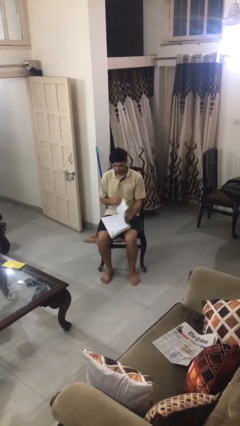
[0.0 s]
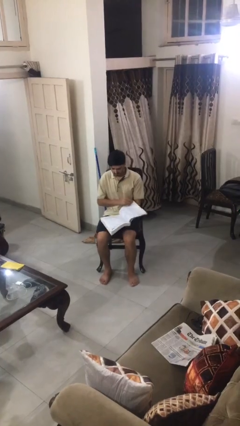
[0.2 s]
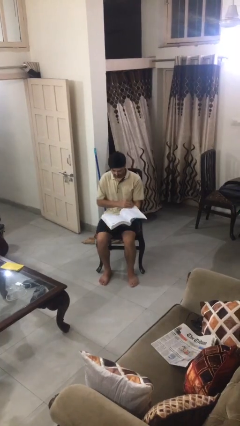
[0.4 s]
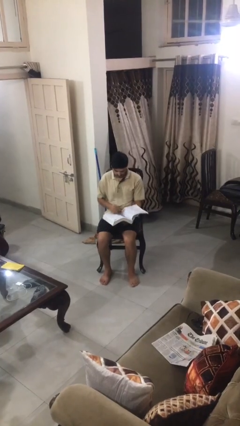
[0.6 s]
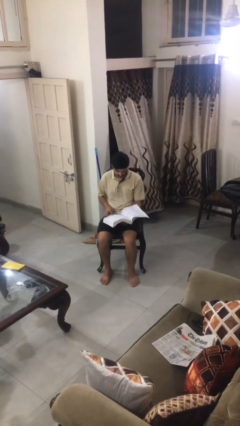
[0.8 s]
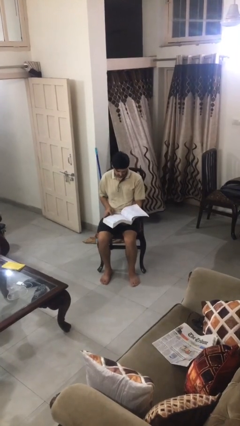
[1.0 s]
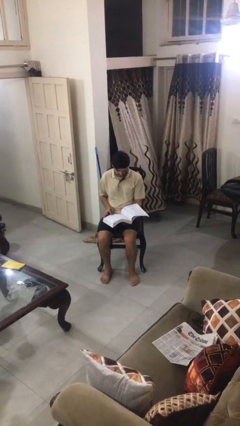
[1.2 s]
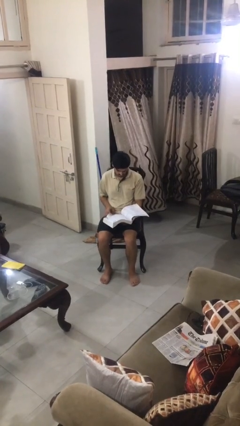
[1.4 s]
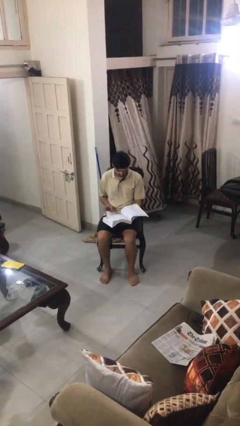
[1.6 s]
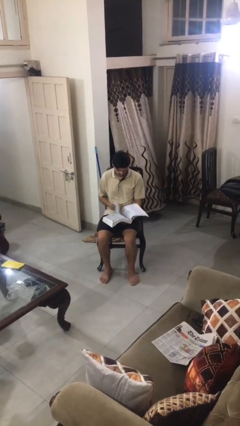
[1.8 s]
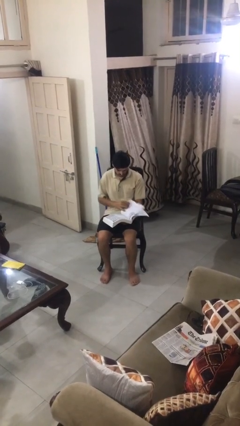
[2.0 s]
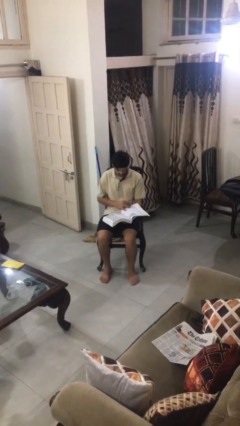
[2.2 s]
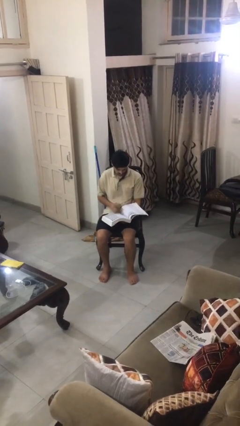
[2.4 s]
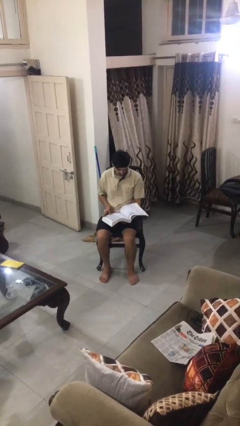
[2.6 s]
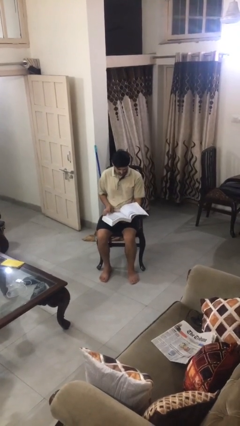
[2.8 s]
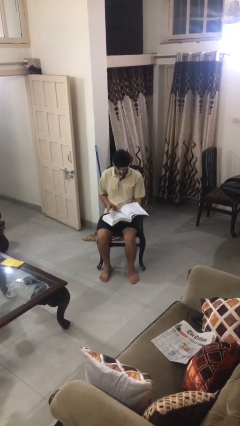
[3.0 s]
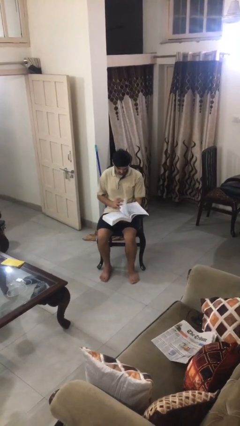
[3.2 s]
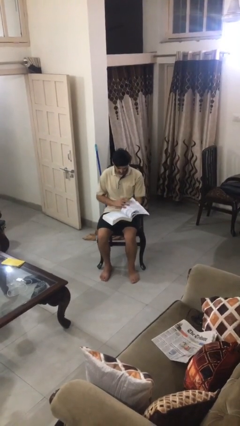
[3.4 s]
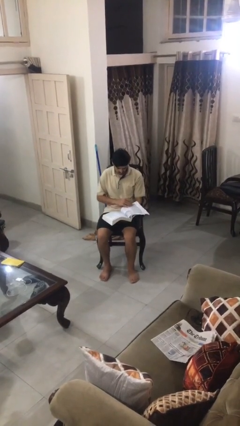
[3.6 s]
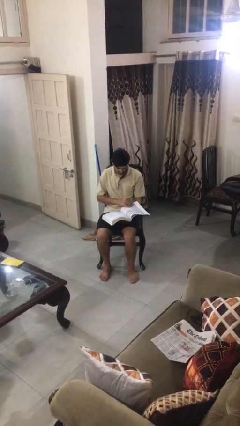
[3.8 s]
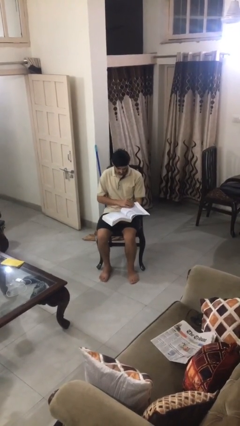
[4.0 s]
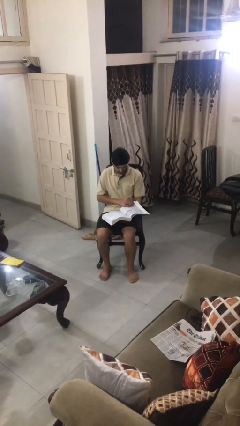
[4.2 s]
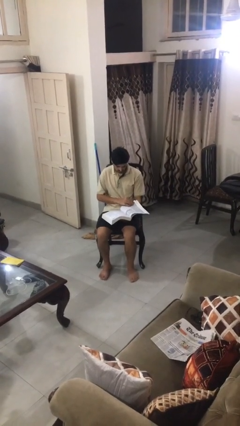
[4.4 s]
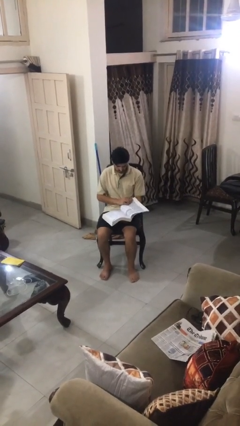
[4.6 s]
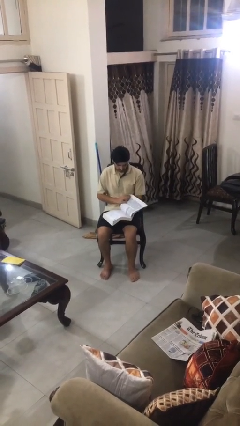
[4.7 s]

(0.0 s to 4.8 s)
person reads book

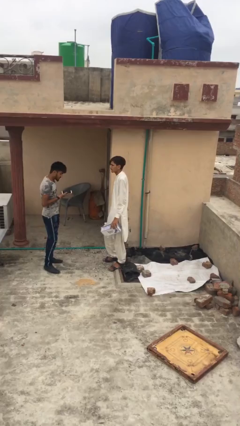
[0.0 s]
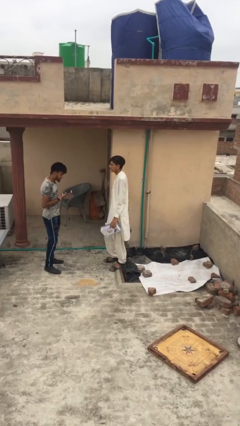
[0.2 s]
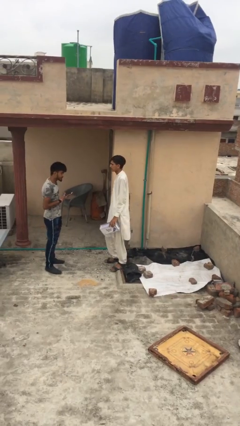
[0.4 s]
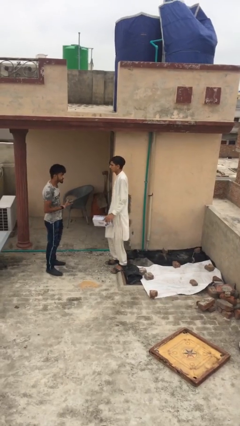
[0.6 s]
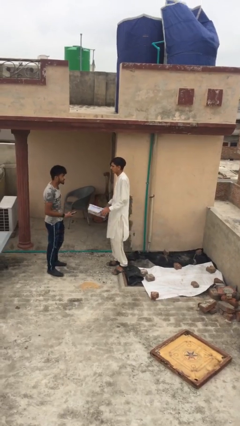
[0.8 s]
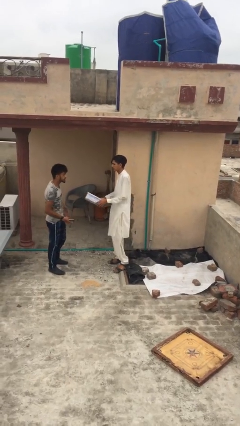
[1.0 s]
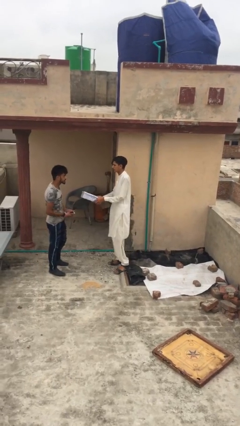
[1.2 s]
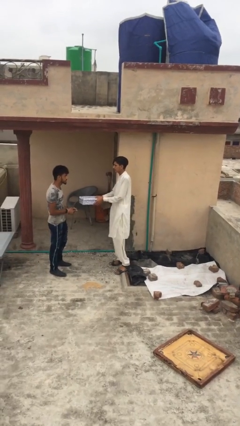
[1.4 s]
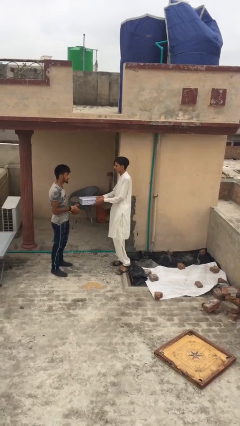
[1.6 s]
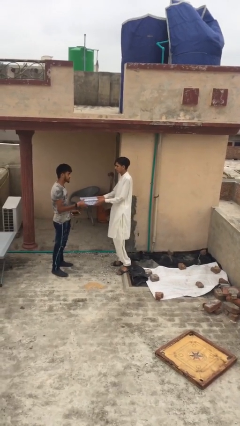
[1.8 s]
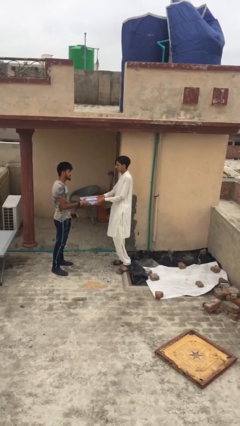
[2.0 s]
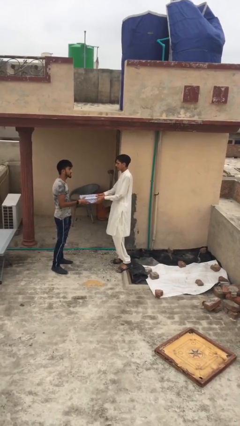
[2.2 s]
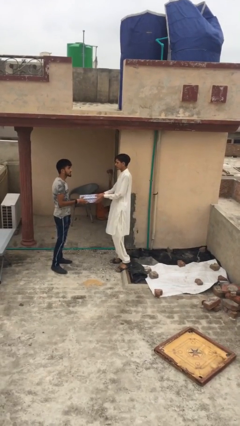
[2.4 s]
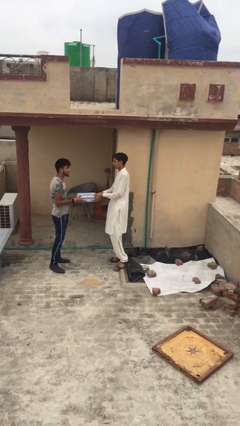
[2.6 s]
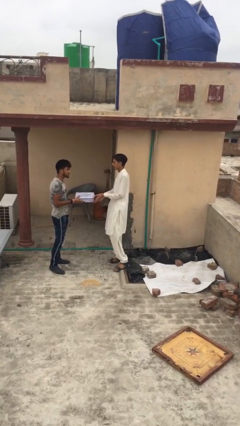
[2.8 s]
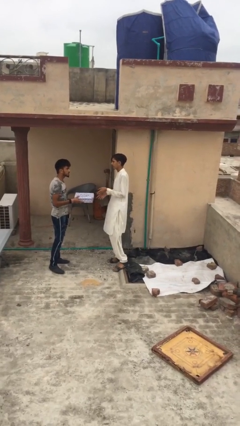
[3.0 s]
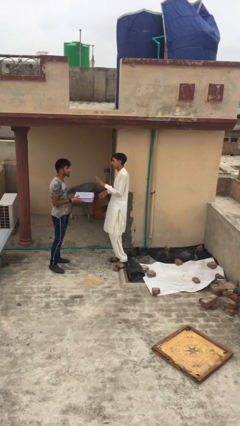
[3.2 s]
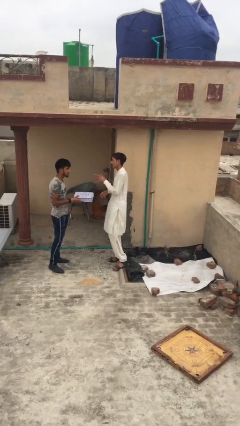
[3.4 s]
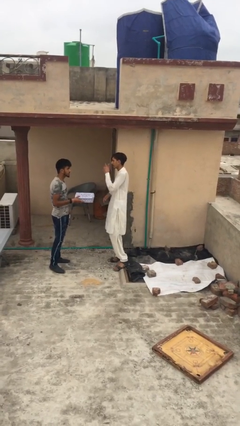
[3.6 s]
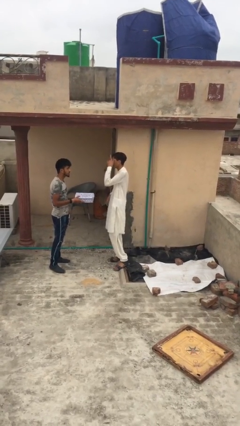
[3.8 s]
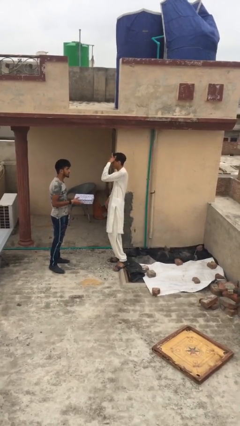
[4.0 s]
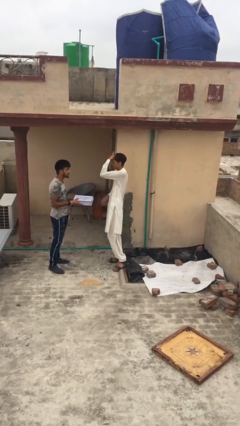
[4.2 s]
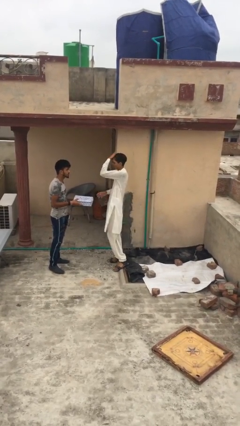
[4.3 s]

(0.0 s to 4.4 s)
person transfers object to person

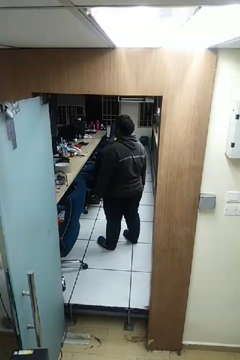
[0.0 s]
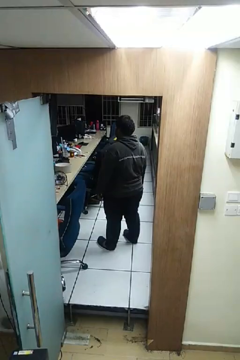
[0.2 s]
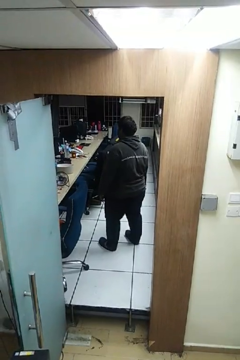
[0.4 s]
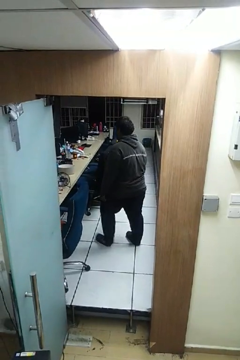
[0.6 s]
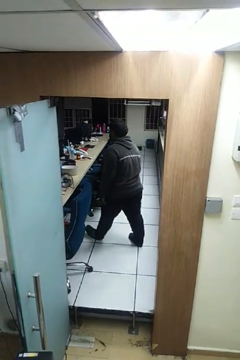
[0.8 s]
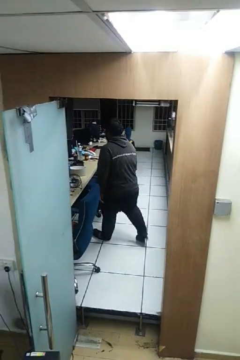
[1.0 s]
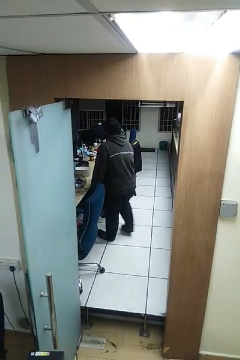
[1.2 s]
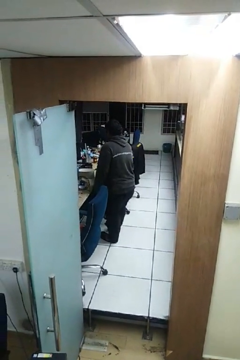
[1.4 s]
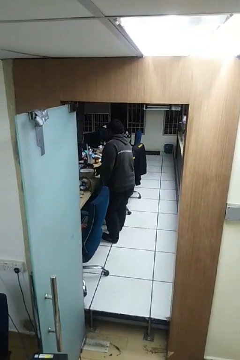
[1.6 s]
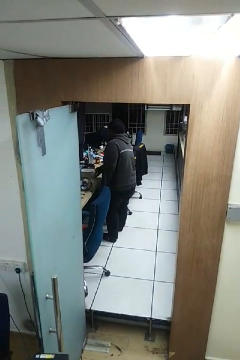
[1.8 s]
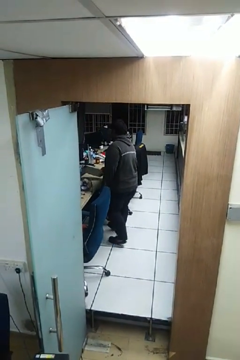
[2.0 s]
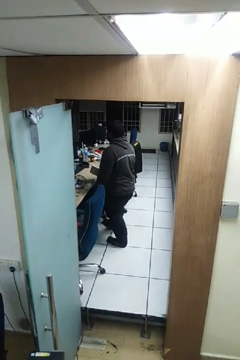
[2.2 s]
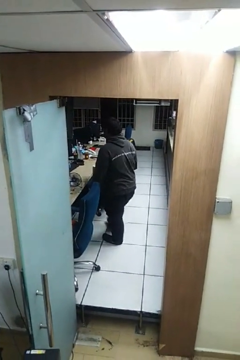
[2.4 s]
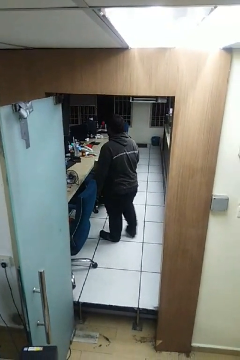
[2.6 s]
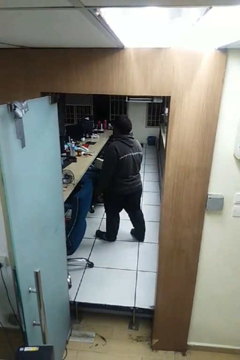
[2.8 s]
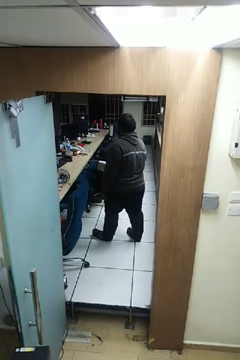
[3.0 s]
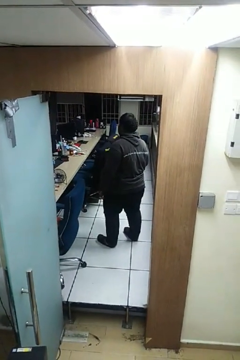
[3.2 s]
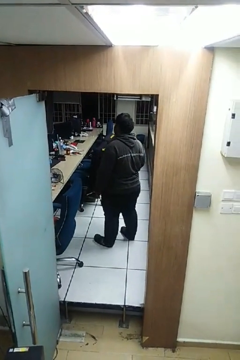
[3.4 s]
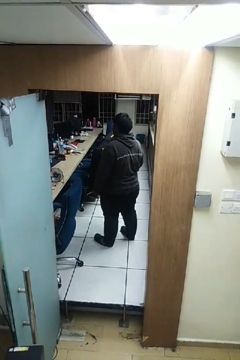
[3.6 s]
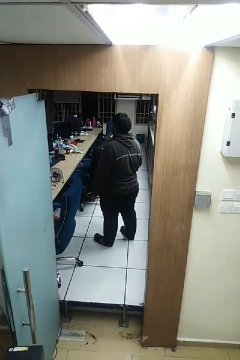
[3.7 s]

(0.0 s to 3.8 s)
person picks up object from table

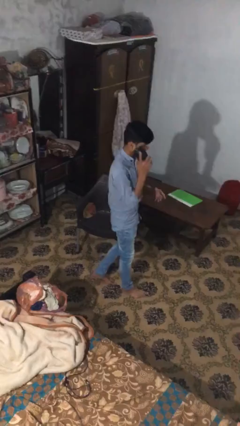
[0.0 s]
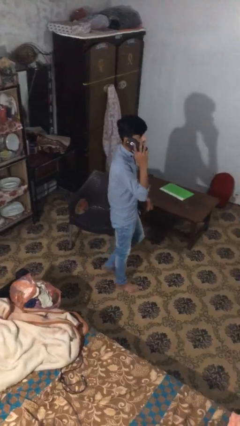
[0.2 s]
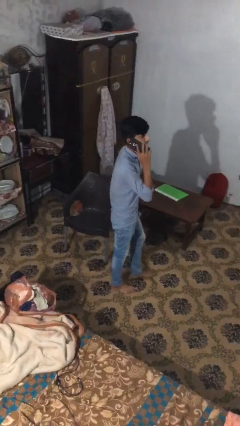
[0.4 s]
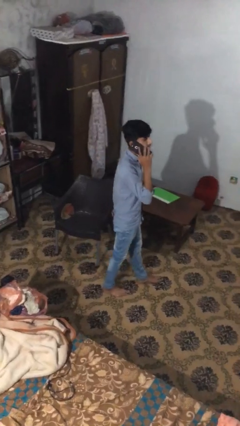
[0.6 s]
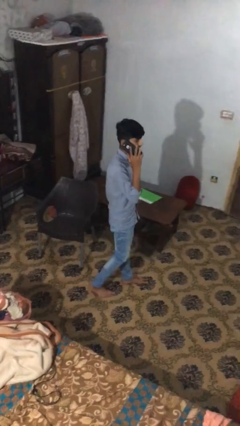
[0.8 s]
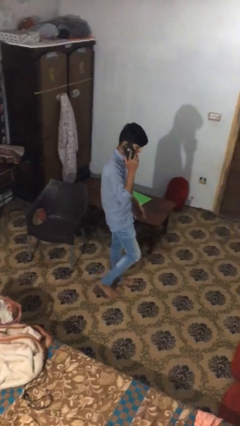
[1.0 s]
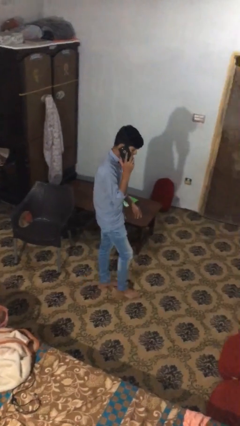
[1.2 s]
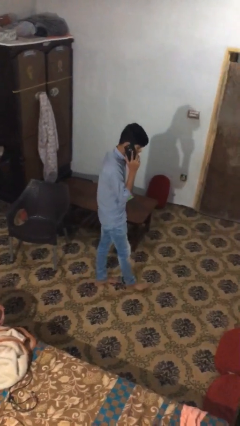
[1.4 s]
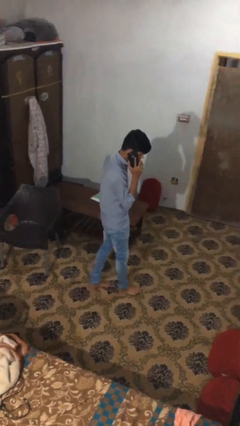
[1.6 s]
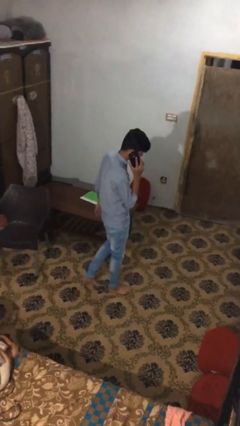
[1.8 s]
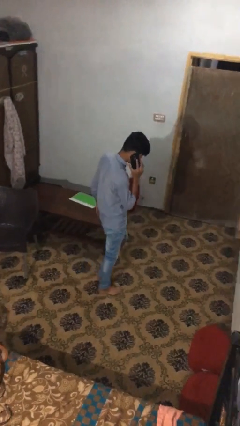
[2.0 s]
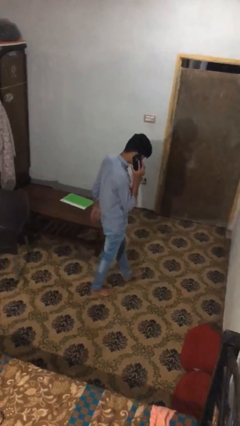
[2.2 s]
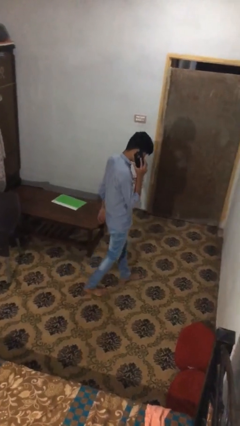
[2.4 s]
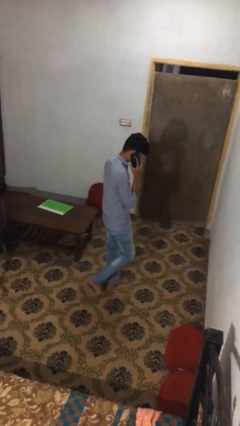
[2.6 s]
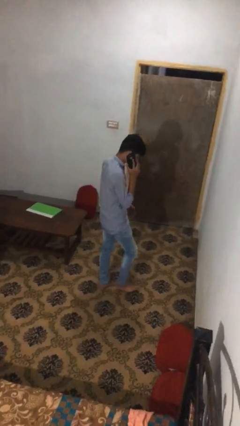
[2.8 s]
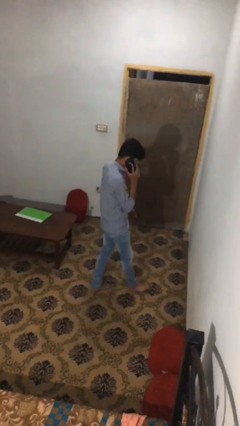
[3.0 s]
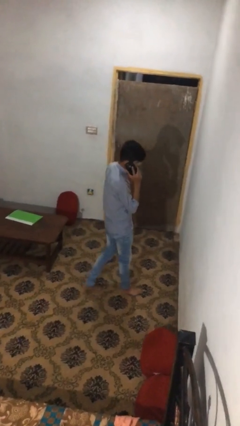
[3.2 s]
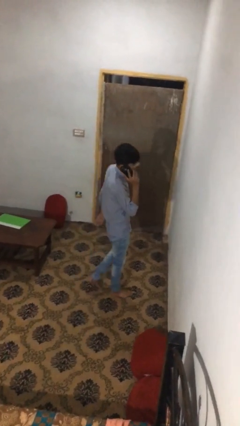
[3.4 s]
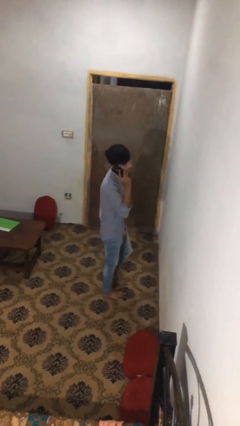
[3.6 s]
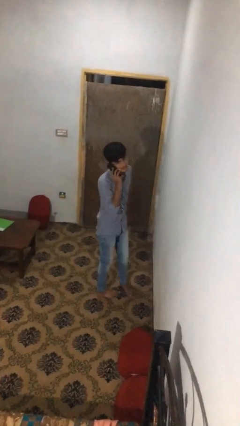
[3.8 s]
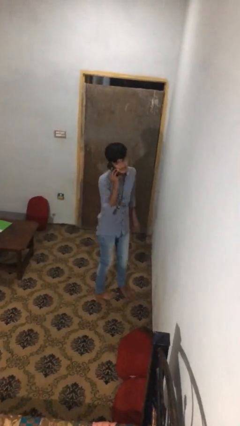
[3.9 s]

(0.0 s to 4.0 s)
person talks on phone

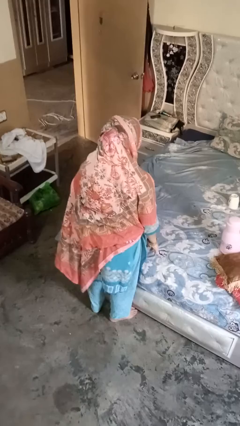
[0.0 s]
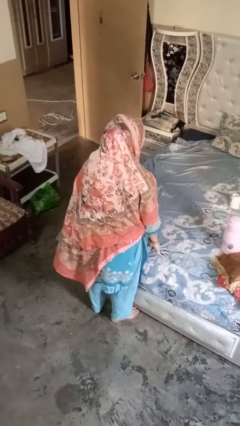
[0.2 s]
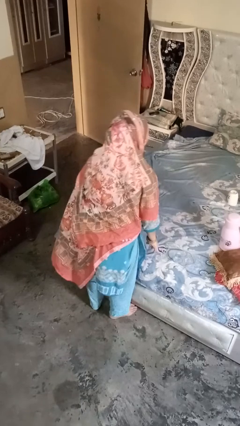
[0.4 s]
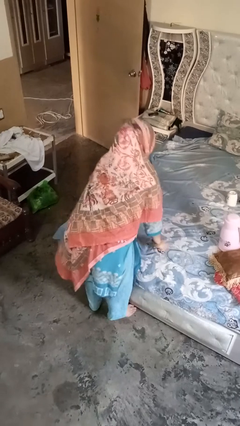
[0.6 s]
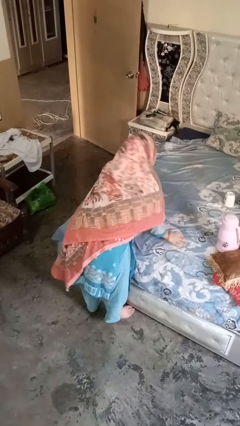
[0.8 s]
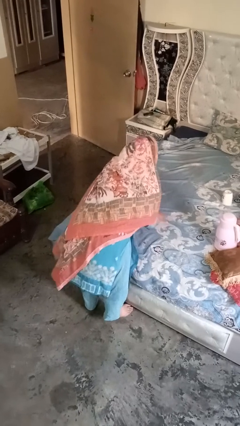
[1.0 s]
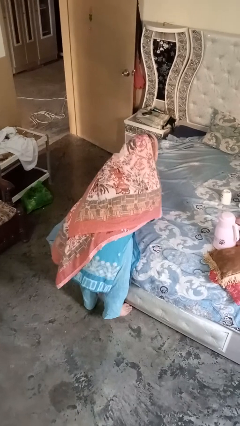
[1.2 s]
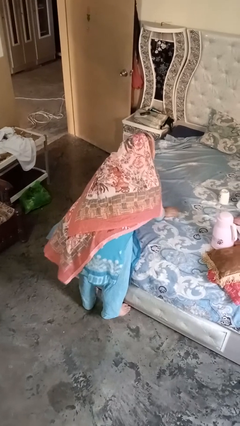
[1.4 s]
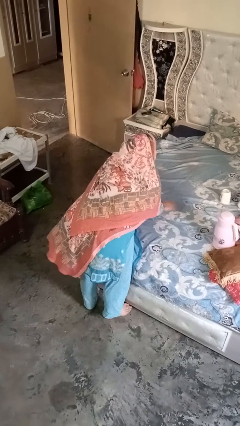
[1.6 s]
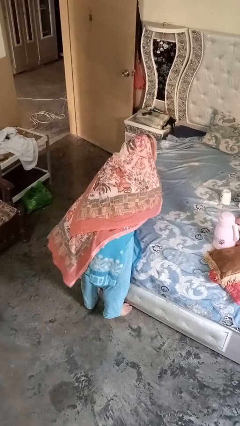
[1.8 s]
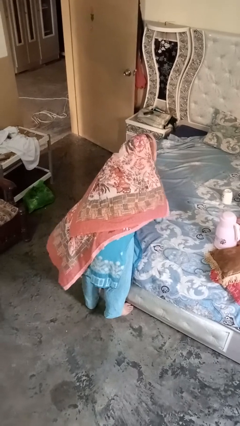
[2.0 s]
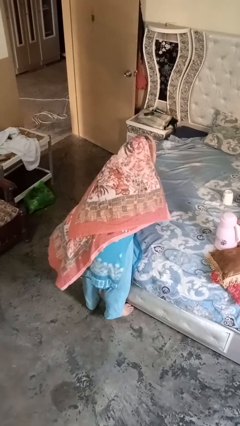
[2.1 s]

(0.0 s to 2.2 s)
person searches under bed
